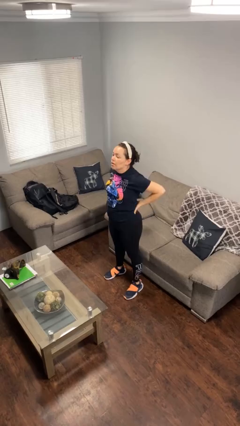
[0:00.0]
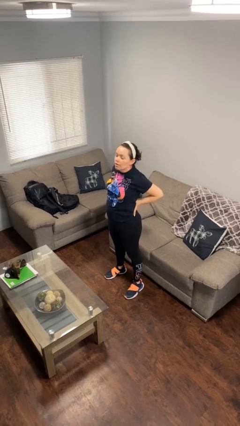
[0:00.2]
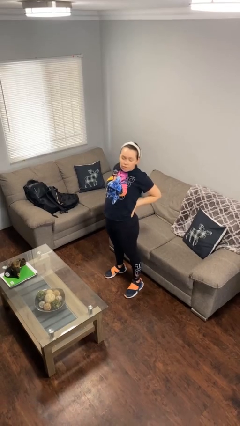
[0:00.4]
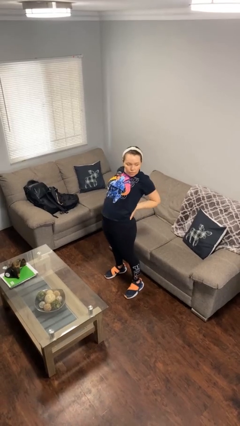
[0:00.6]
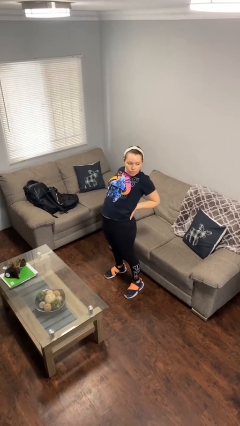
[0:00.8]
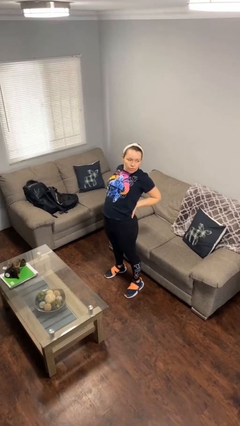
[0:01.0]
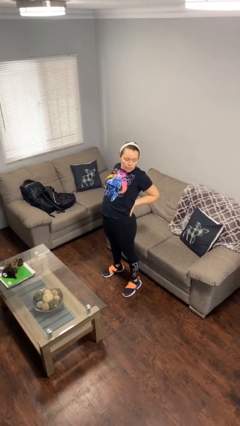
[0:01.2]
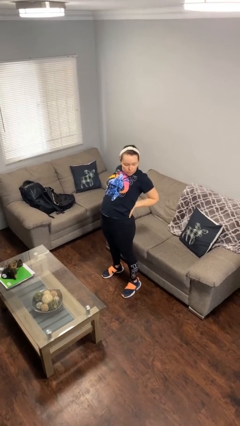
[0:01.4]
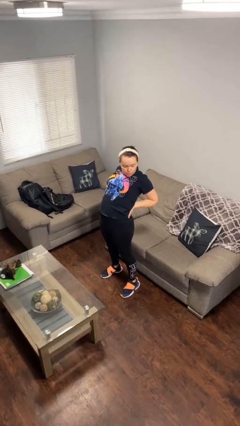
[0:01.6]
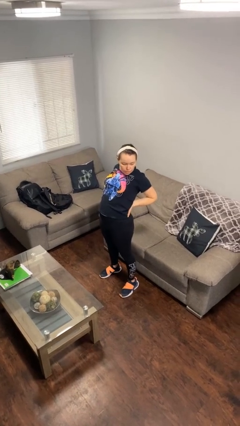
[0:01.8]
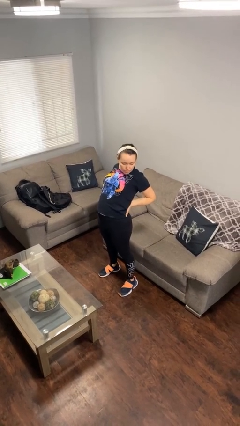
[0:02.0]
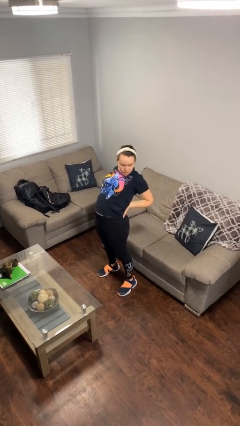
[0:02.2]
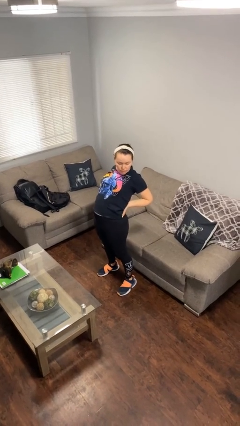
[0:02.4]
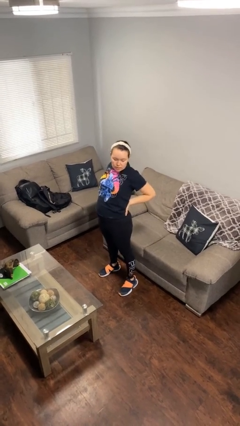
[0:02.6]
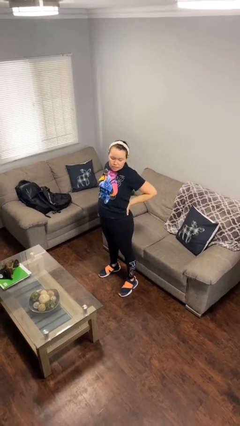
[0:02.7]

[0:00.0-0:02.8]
person stretches back

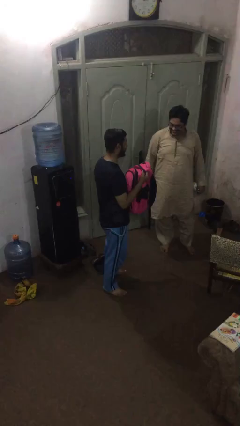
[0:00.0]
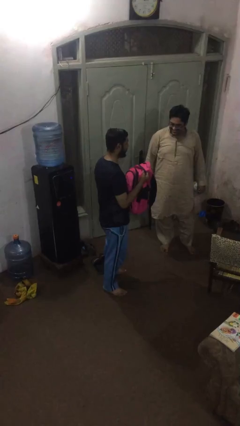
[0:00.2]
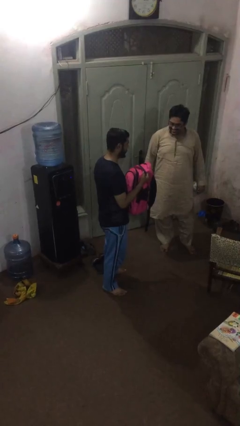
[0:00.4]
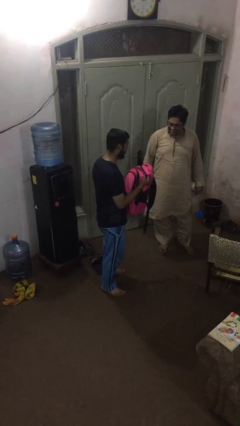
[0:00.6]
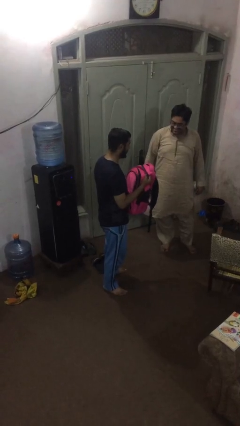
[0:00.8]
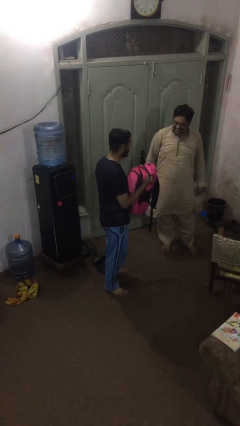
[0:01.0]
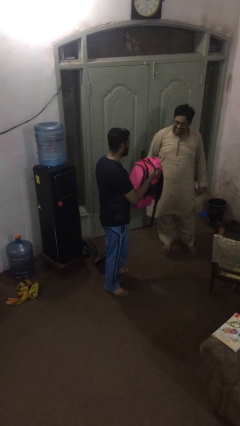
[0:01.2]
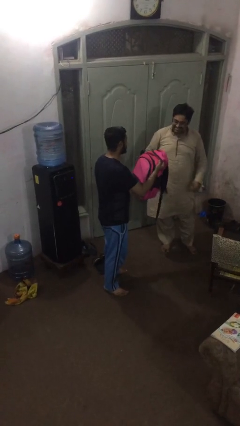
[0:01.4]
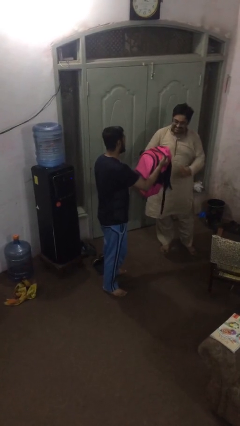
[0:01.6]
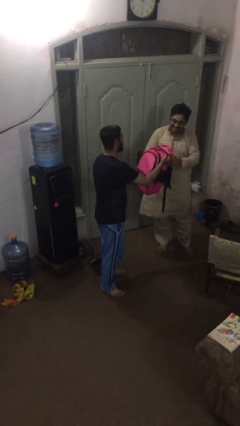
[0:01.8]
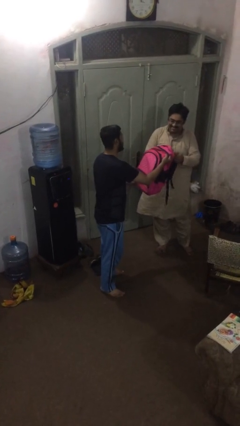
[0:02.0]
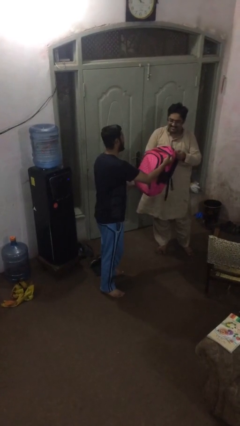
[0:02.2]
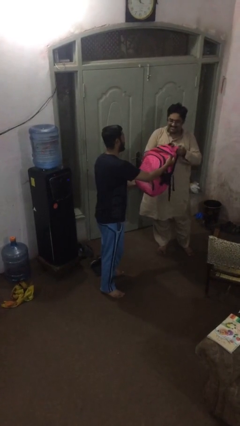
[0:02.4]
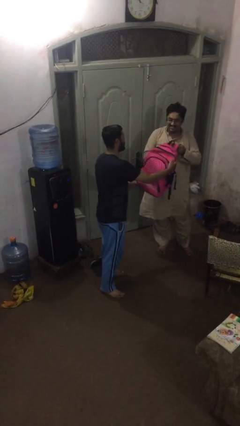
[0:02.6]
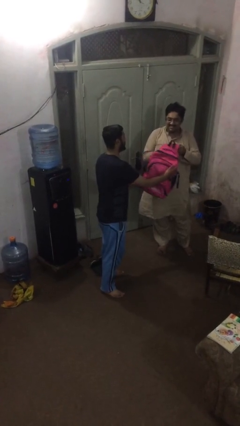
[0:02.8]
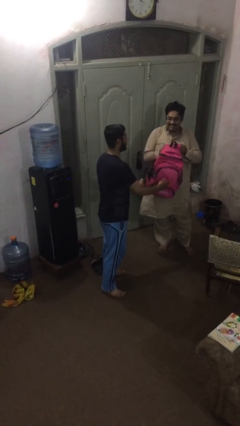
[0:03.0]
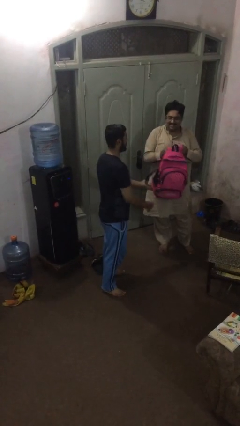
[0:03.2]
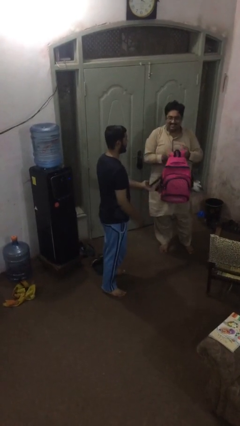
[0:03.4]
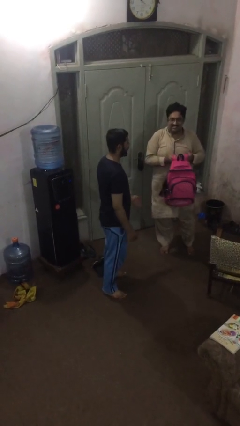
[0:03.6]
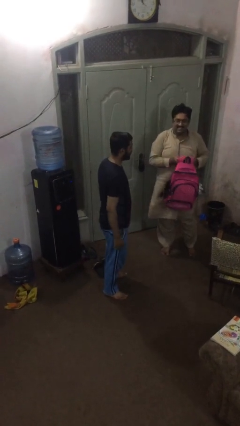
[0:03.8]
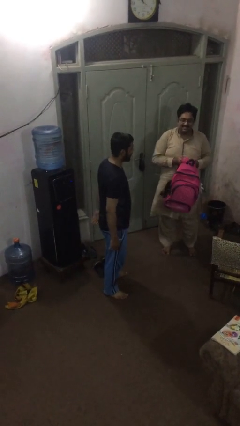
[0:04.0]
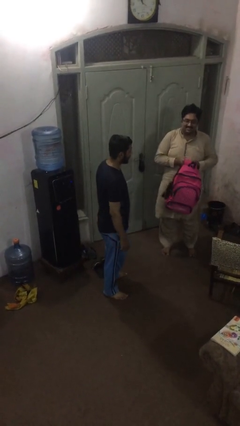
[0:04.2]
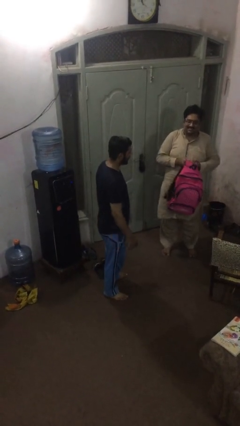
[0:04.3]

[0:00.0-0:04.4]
person transfers object to person

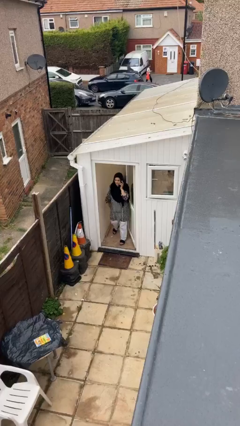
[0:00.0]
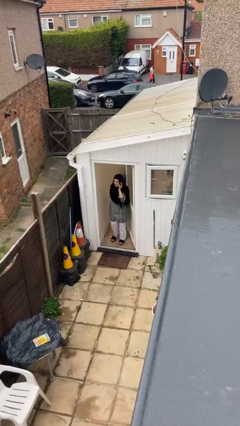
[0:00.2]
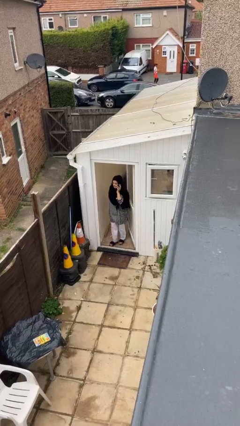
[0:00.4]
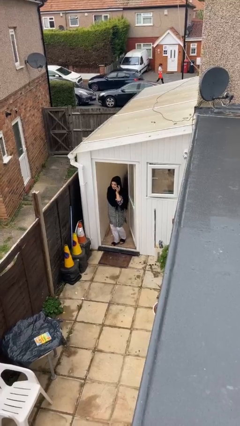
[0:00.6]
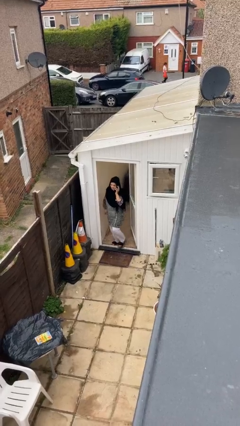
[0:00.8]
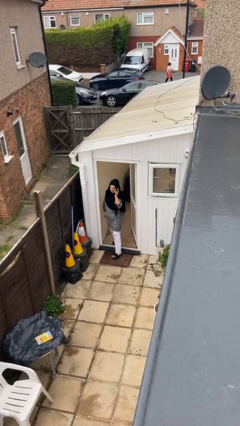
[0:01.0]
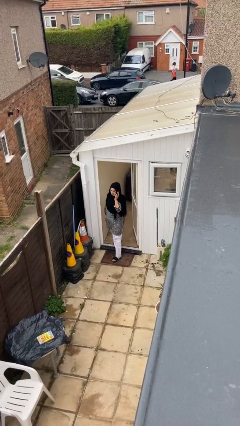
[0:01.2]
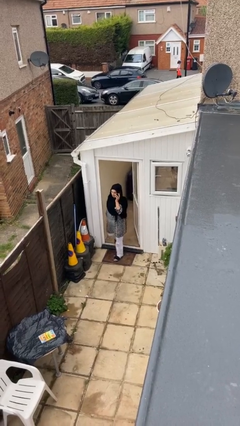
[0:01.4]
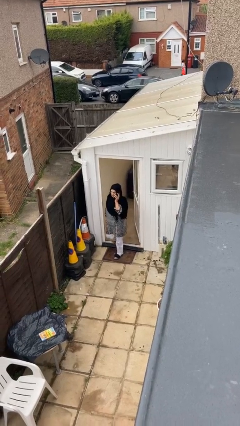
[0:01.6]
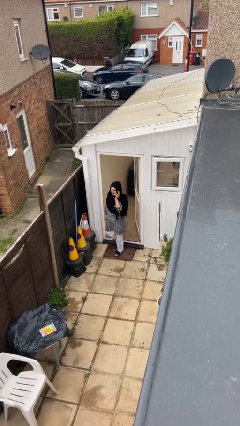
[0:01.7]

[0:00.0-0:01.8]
person enters scene through structure

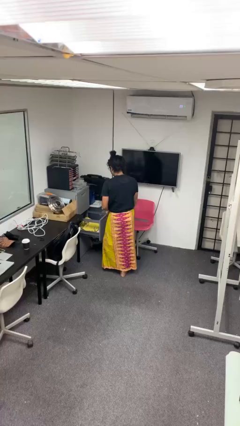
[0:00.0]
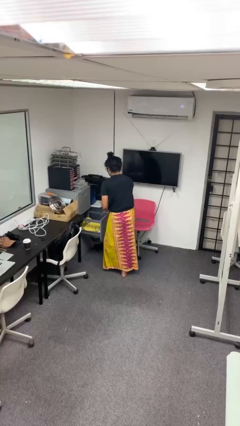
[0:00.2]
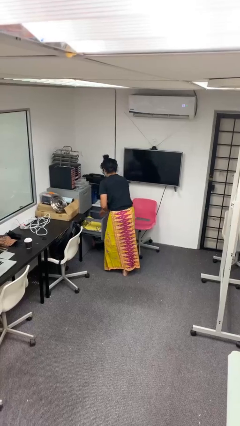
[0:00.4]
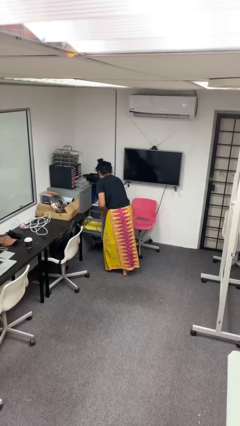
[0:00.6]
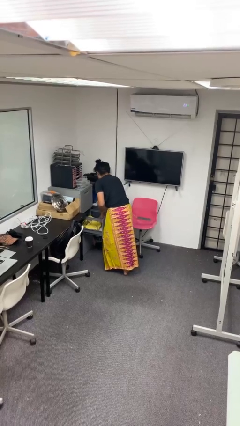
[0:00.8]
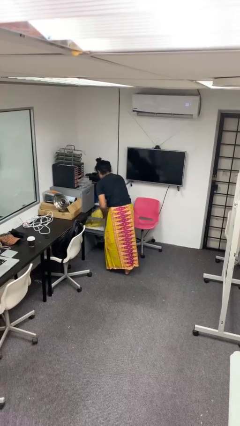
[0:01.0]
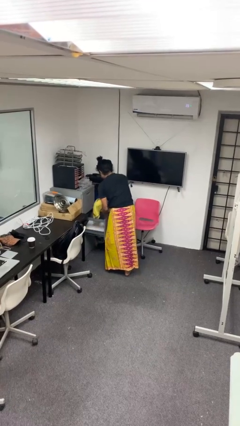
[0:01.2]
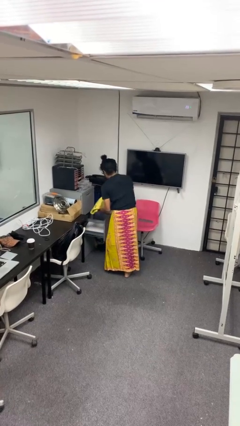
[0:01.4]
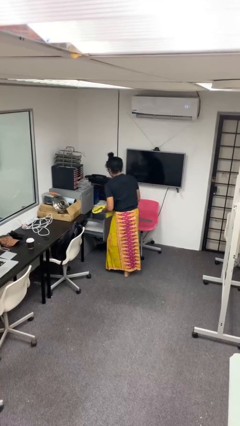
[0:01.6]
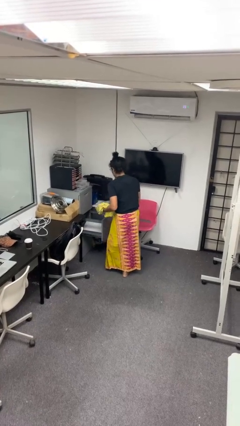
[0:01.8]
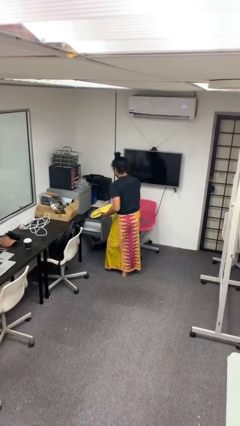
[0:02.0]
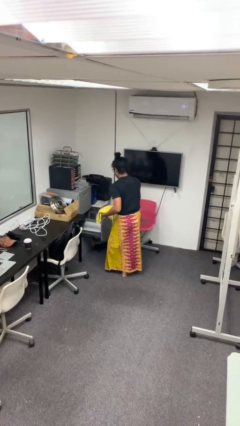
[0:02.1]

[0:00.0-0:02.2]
person takes clothes from dresser

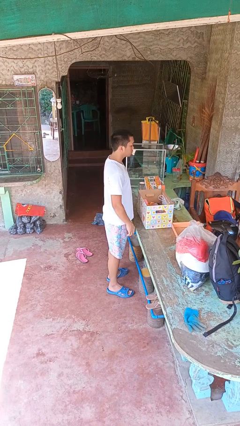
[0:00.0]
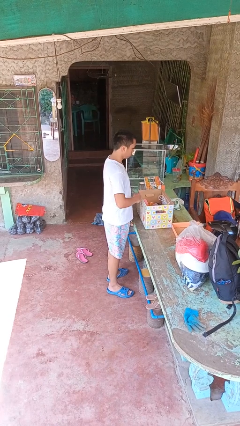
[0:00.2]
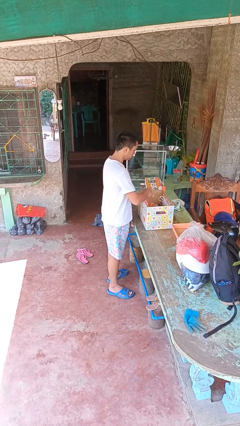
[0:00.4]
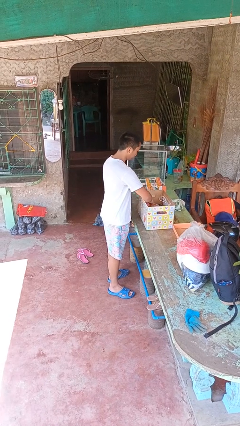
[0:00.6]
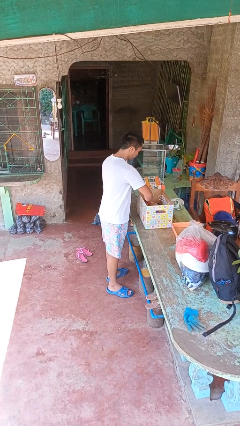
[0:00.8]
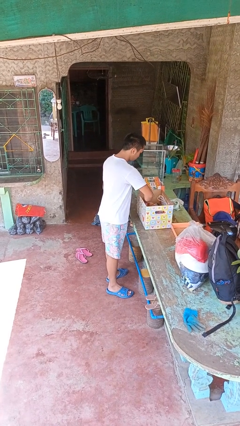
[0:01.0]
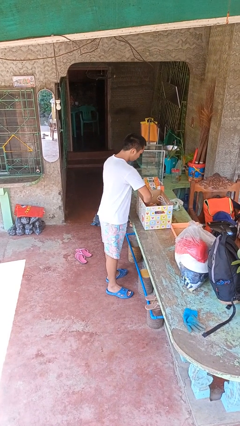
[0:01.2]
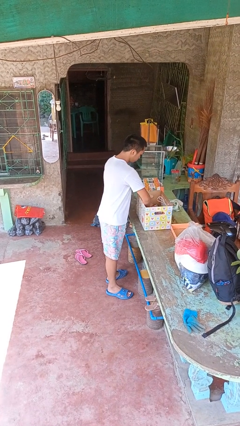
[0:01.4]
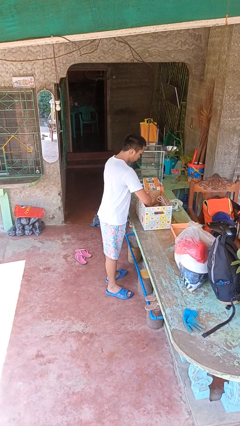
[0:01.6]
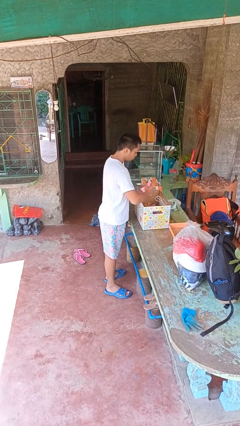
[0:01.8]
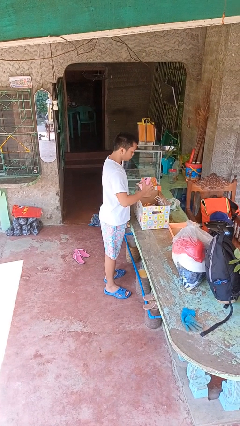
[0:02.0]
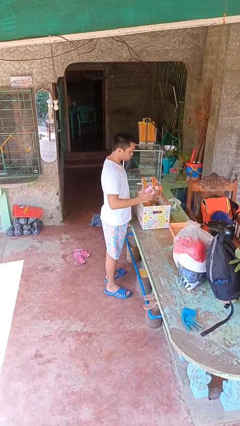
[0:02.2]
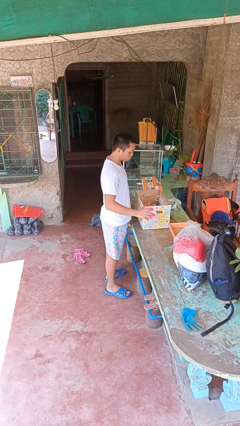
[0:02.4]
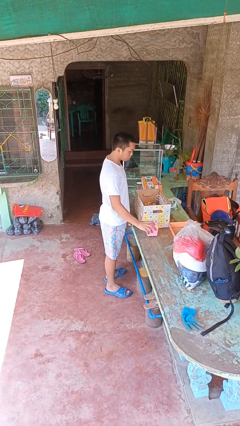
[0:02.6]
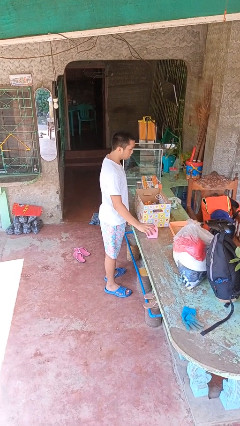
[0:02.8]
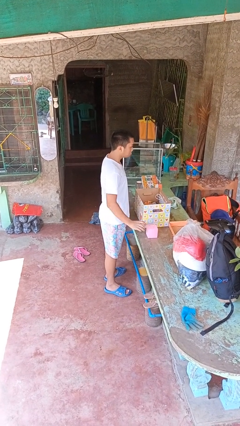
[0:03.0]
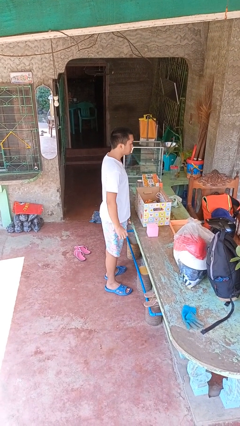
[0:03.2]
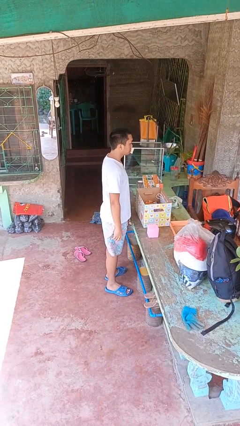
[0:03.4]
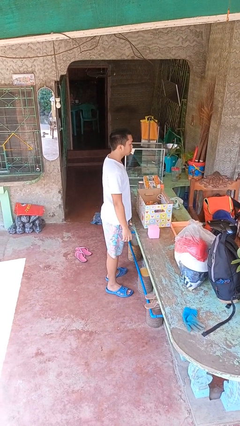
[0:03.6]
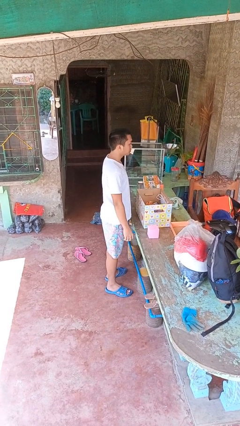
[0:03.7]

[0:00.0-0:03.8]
person takes object from box

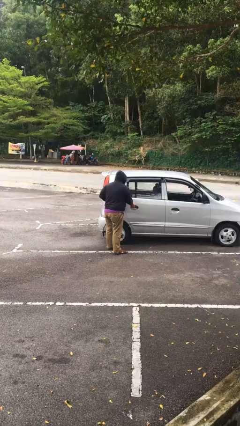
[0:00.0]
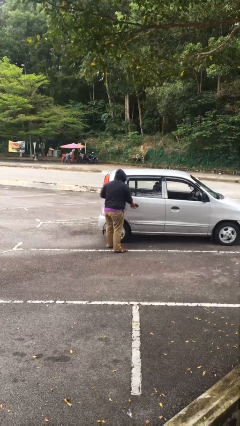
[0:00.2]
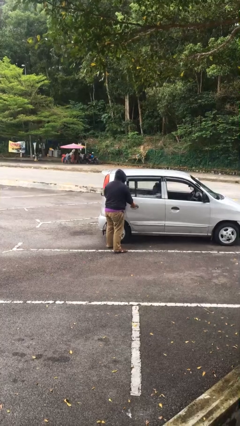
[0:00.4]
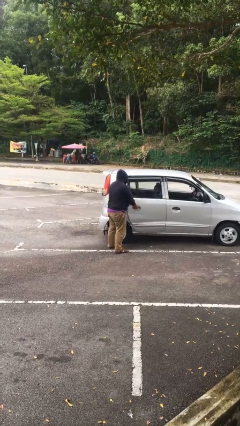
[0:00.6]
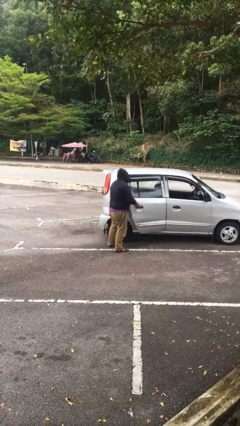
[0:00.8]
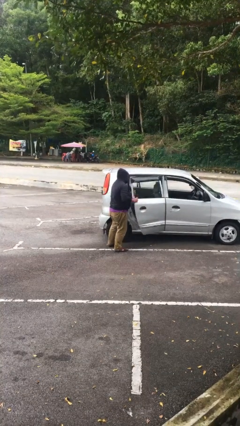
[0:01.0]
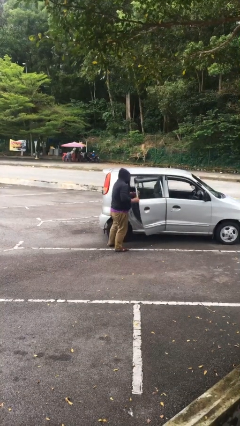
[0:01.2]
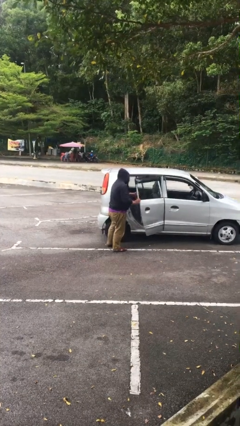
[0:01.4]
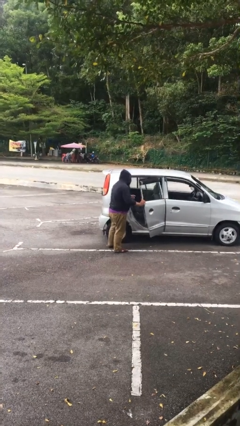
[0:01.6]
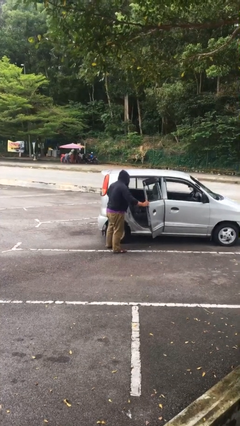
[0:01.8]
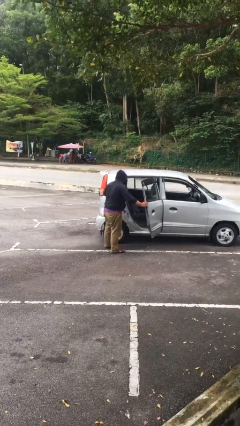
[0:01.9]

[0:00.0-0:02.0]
person opens car door
